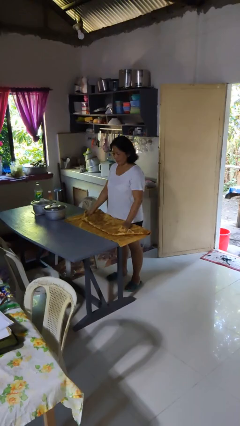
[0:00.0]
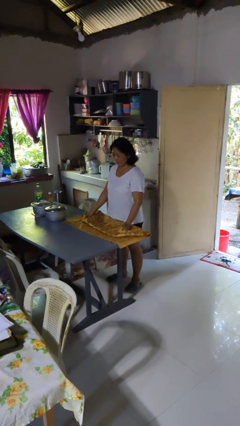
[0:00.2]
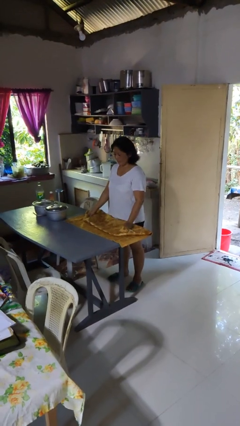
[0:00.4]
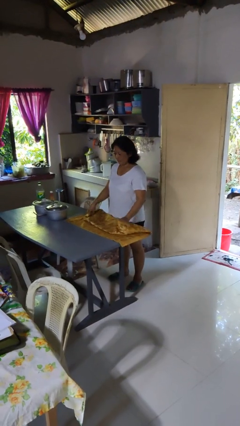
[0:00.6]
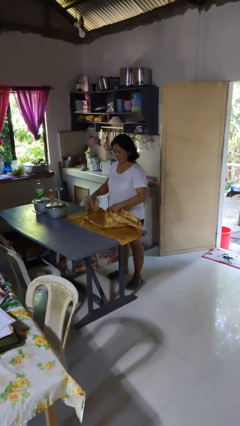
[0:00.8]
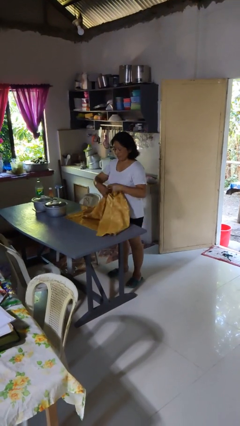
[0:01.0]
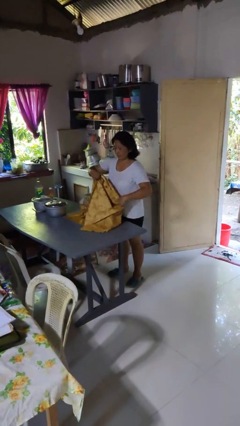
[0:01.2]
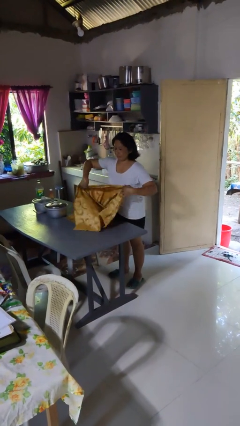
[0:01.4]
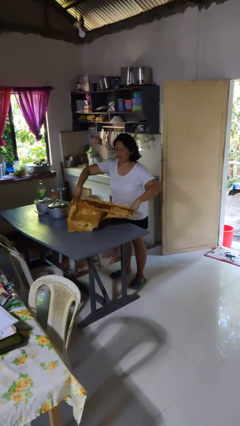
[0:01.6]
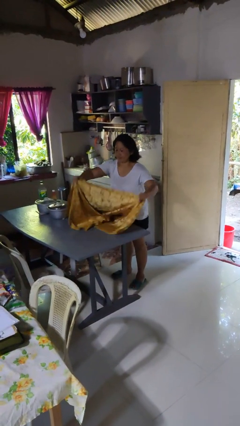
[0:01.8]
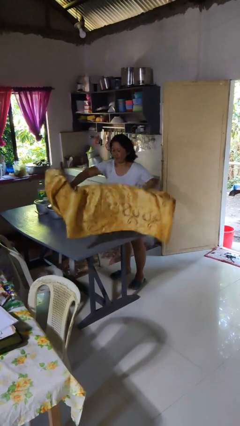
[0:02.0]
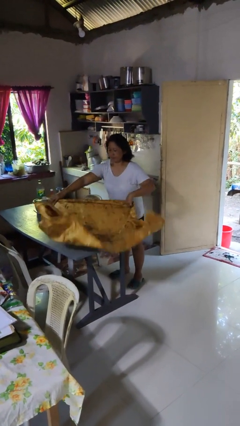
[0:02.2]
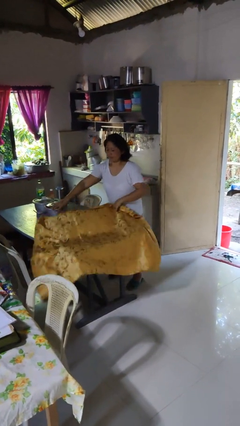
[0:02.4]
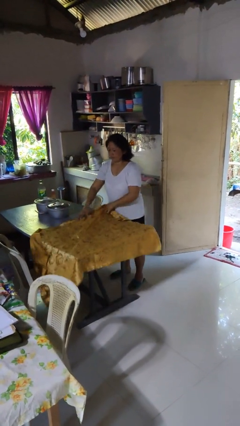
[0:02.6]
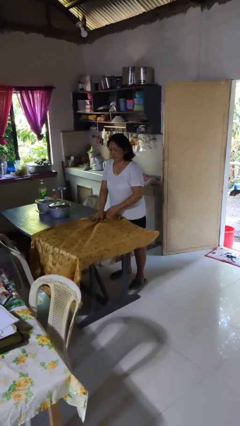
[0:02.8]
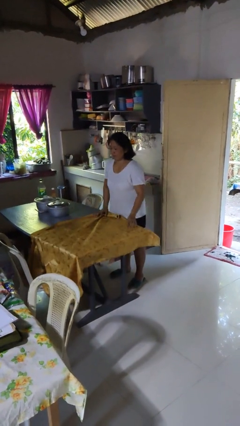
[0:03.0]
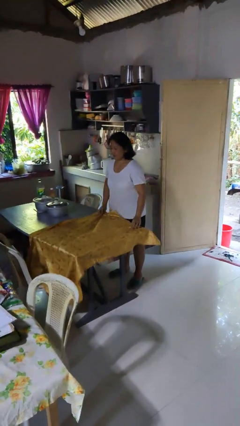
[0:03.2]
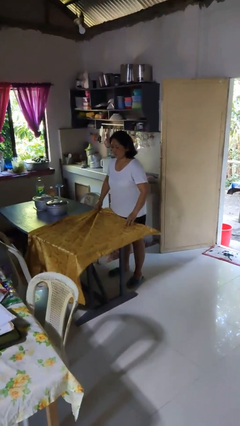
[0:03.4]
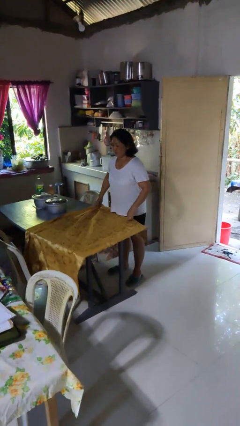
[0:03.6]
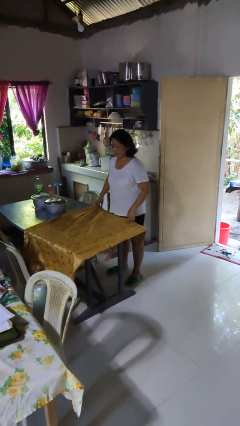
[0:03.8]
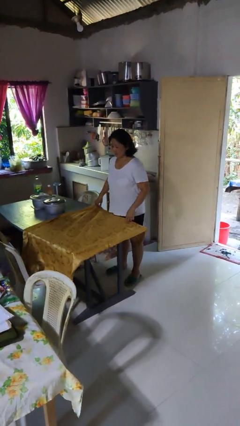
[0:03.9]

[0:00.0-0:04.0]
person spreads tablecloth

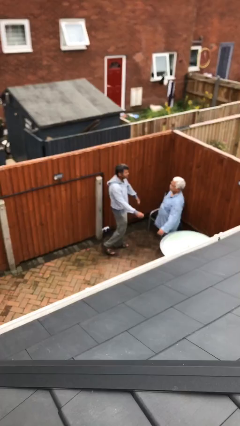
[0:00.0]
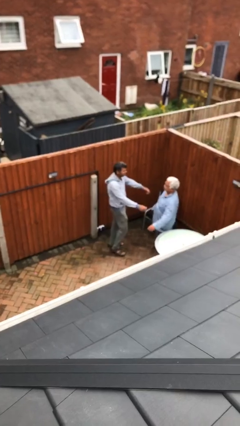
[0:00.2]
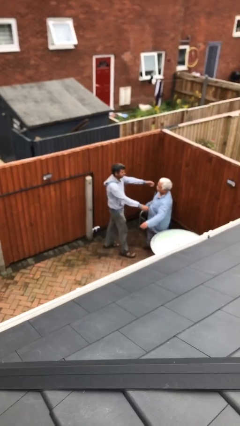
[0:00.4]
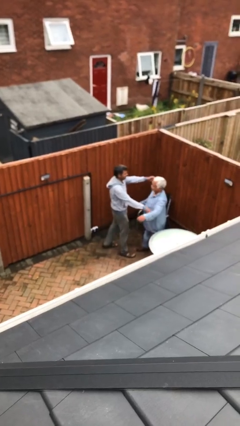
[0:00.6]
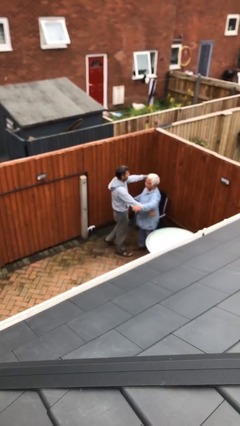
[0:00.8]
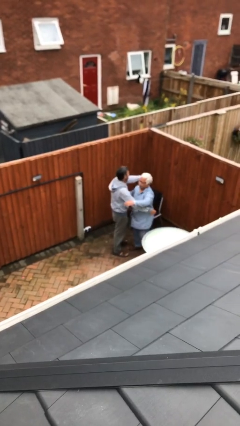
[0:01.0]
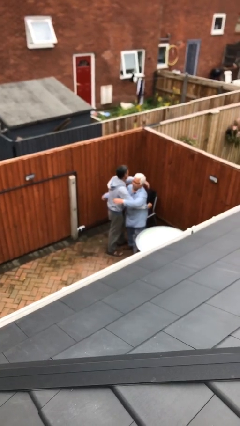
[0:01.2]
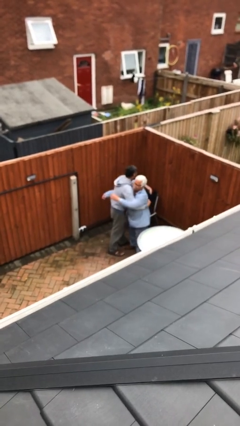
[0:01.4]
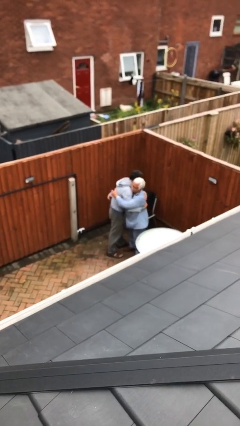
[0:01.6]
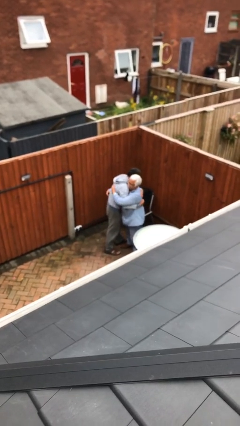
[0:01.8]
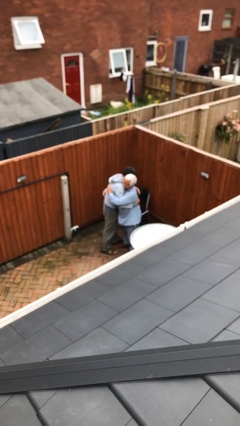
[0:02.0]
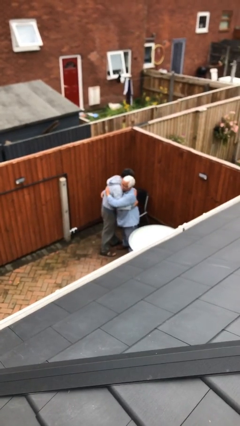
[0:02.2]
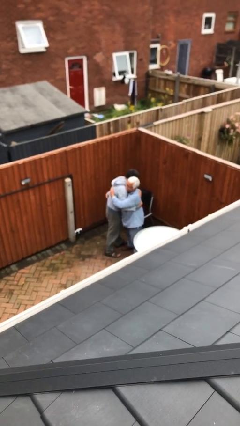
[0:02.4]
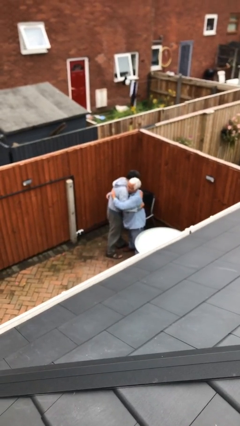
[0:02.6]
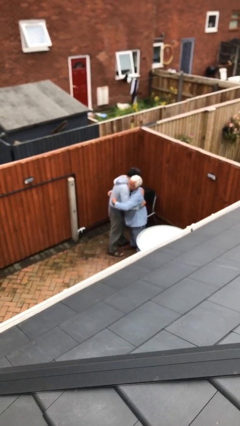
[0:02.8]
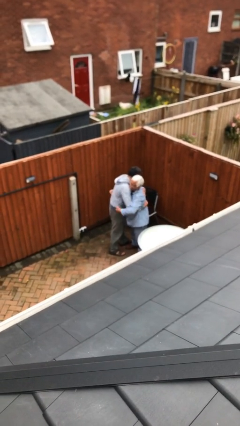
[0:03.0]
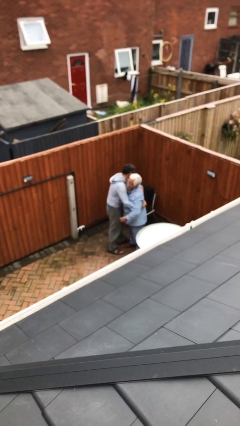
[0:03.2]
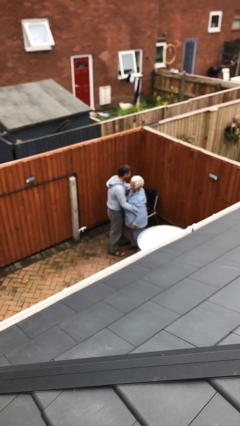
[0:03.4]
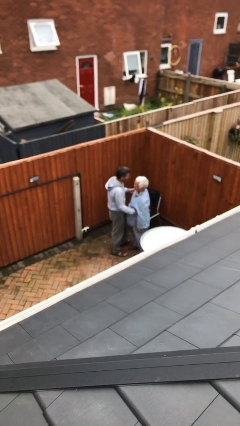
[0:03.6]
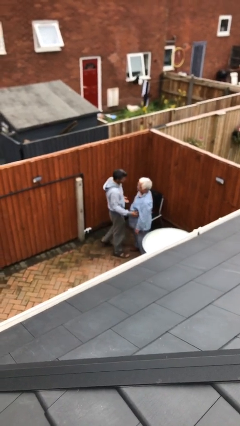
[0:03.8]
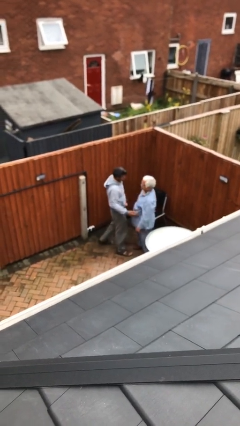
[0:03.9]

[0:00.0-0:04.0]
person embraces person

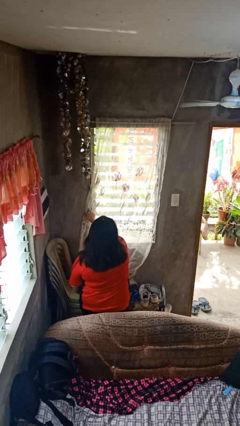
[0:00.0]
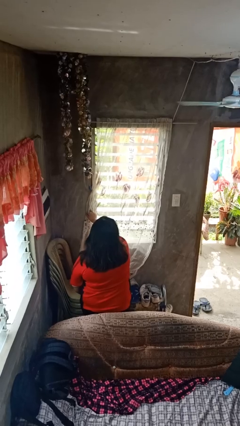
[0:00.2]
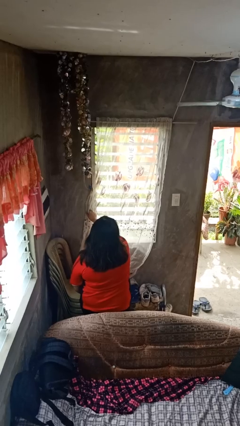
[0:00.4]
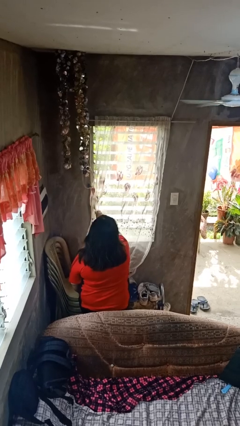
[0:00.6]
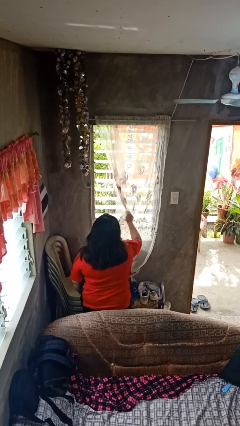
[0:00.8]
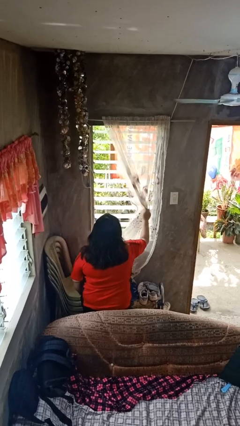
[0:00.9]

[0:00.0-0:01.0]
person opens curtains

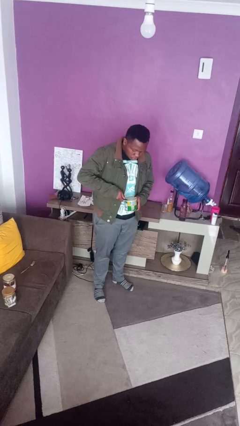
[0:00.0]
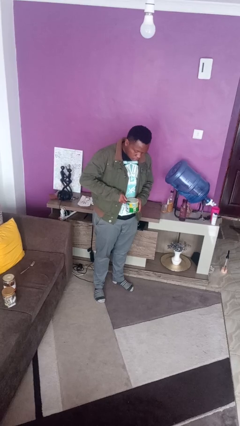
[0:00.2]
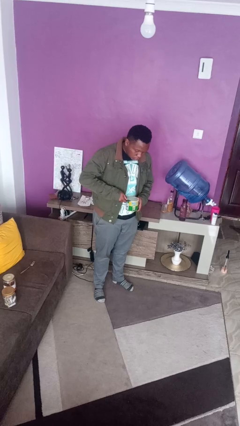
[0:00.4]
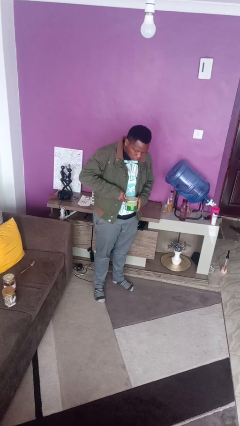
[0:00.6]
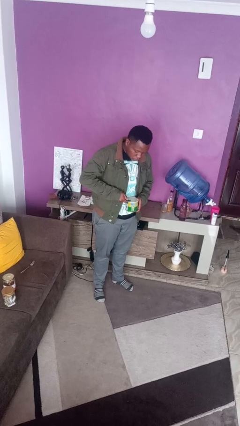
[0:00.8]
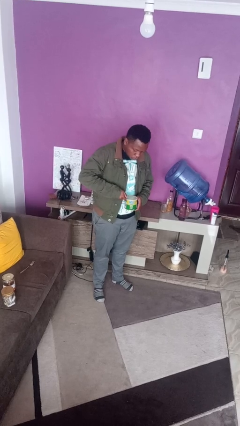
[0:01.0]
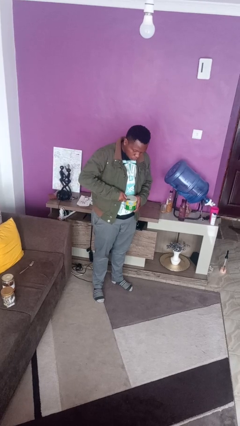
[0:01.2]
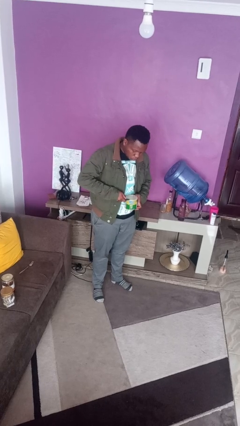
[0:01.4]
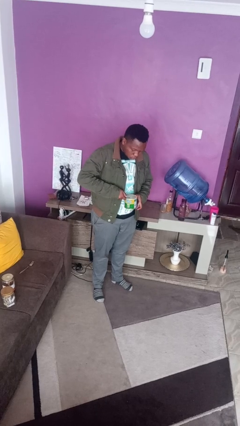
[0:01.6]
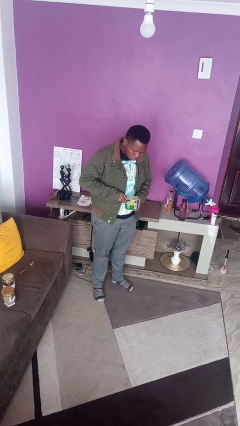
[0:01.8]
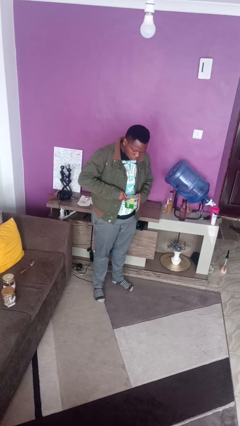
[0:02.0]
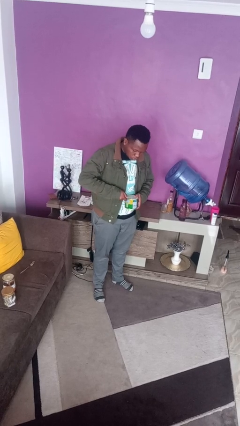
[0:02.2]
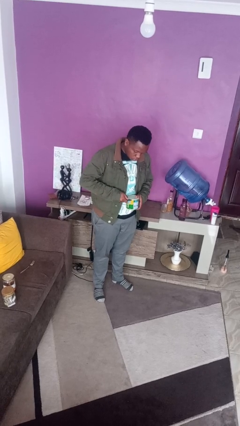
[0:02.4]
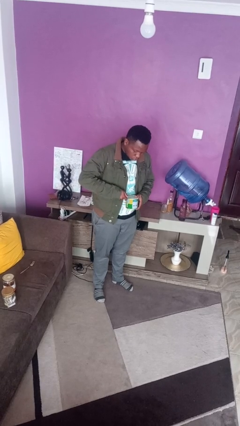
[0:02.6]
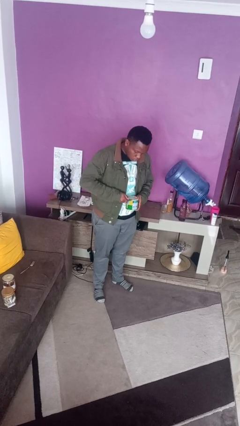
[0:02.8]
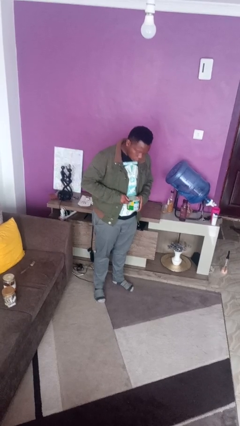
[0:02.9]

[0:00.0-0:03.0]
person opens can with can opener

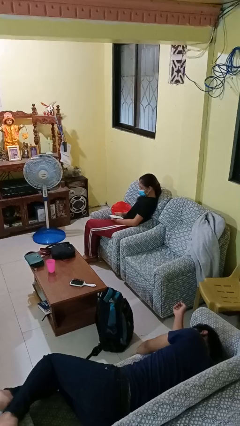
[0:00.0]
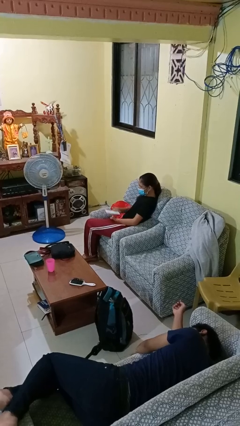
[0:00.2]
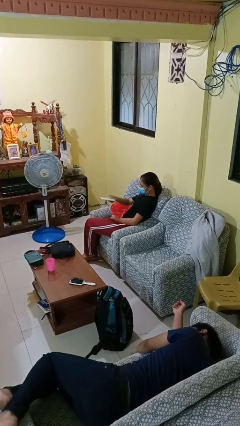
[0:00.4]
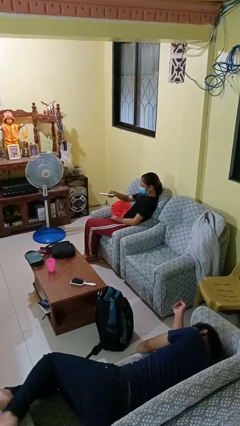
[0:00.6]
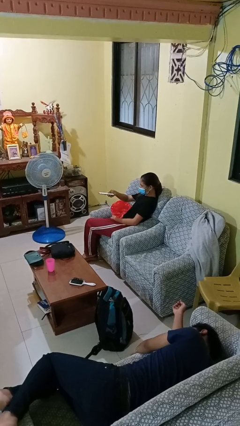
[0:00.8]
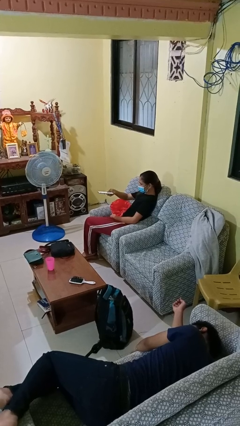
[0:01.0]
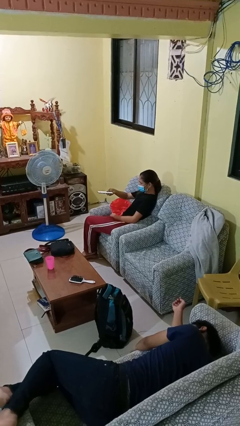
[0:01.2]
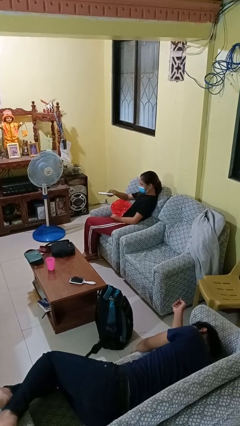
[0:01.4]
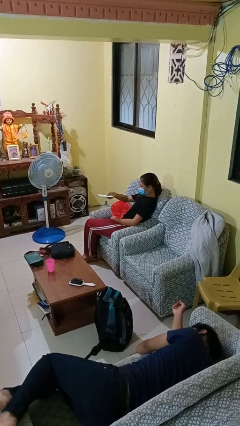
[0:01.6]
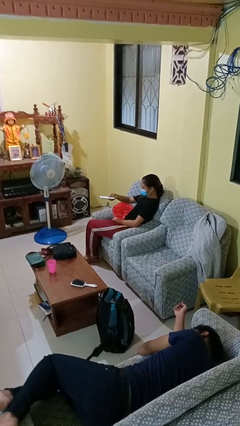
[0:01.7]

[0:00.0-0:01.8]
person uses television remote

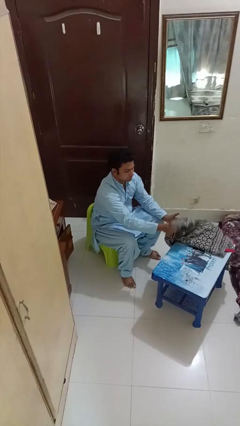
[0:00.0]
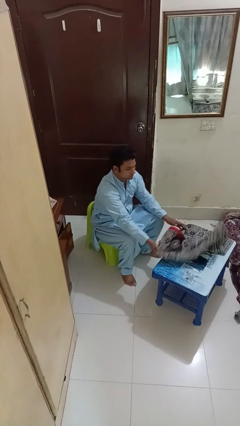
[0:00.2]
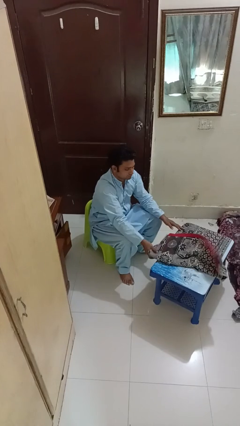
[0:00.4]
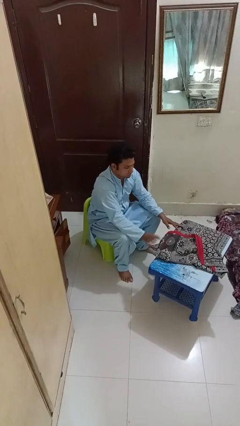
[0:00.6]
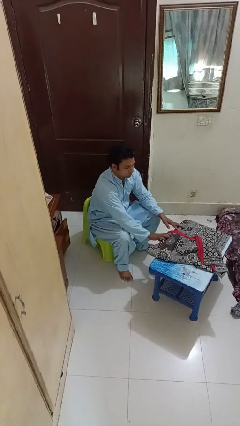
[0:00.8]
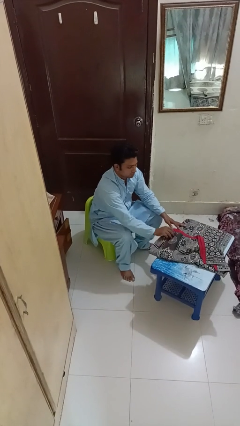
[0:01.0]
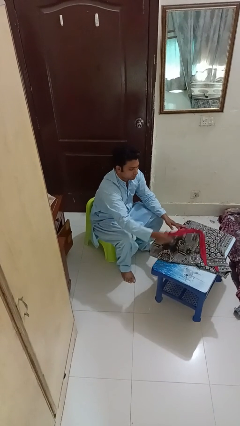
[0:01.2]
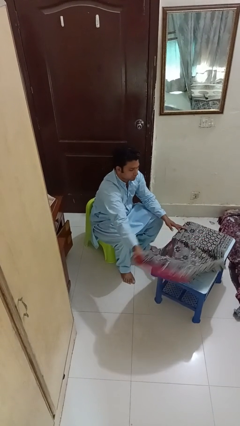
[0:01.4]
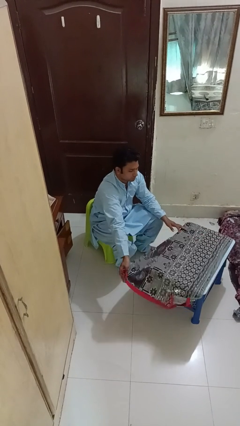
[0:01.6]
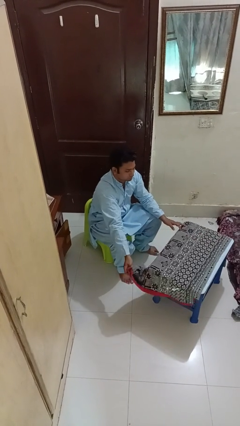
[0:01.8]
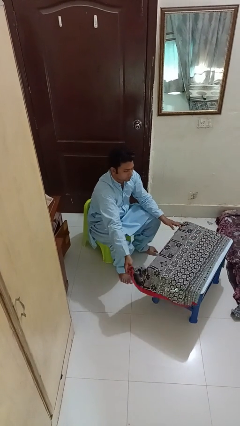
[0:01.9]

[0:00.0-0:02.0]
person unfolds blanket

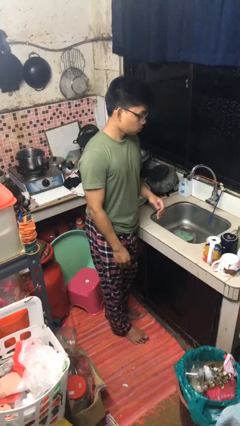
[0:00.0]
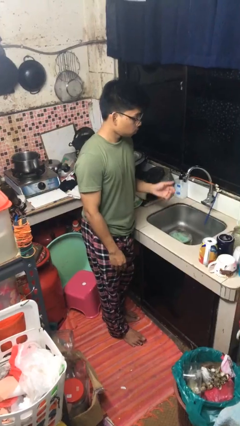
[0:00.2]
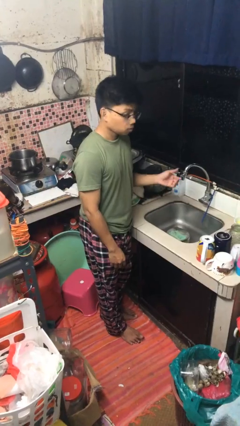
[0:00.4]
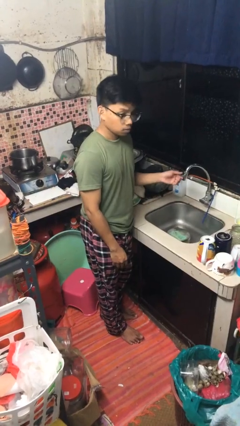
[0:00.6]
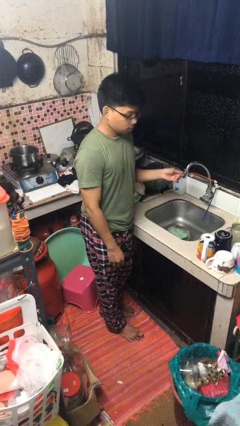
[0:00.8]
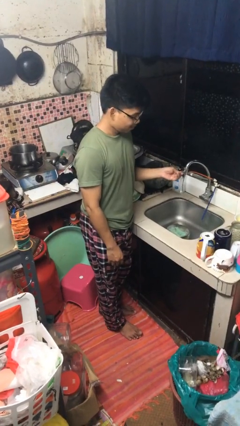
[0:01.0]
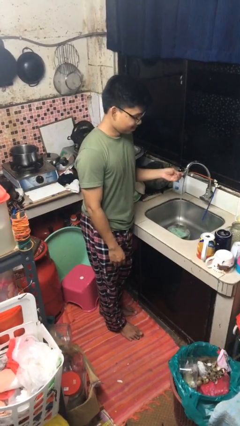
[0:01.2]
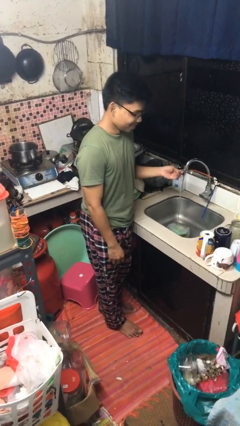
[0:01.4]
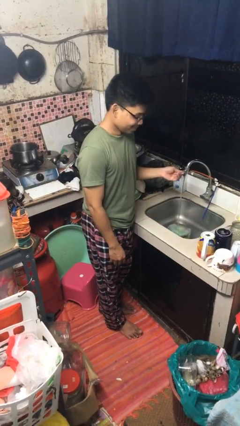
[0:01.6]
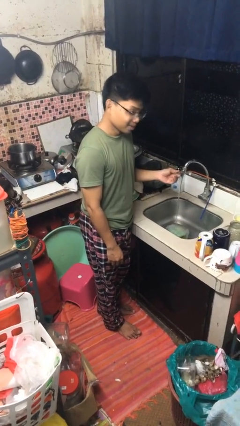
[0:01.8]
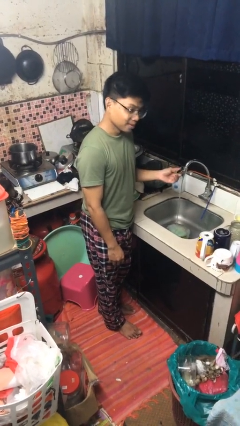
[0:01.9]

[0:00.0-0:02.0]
person turns on faucet
